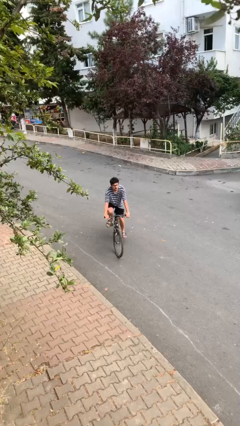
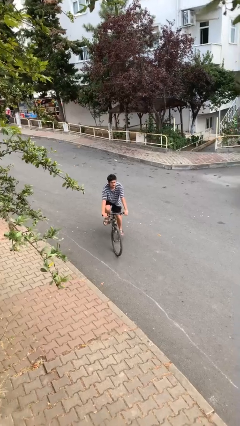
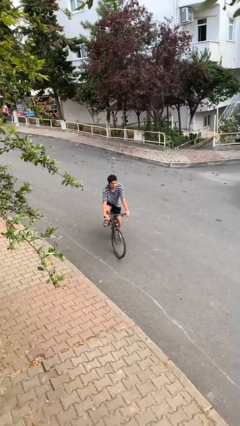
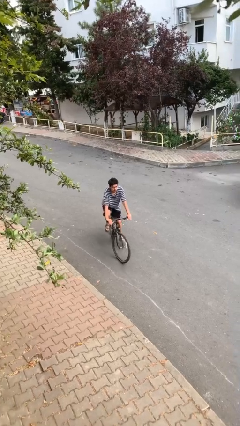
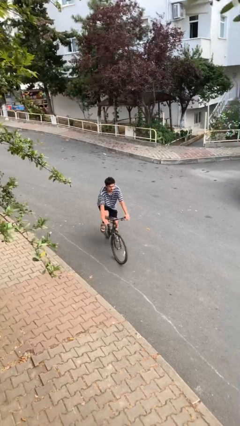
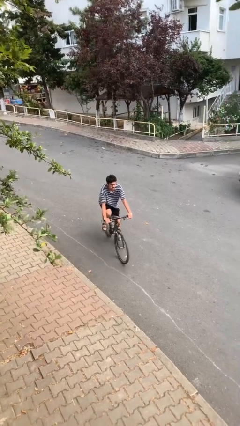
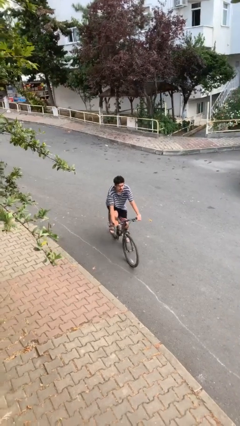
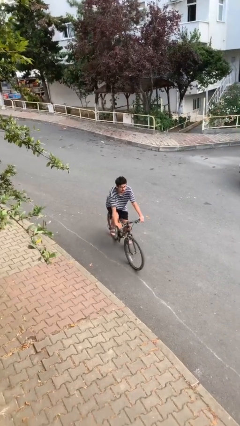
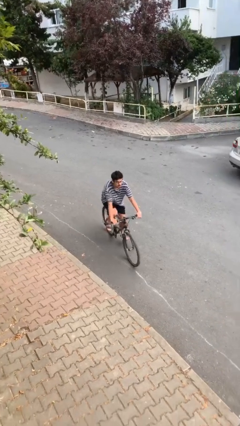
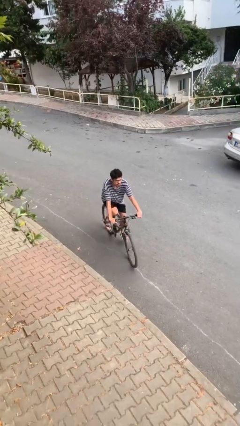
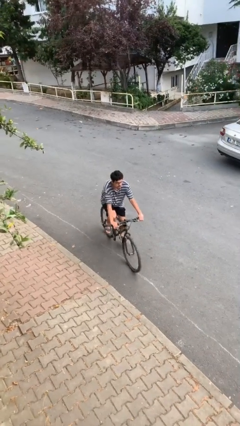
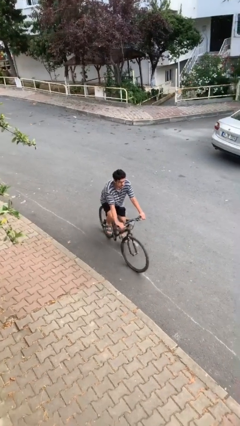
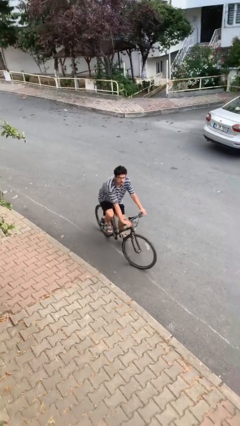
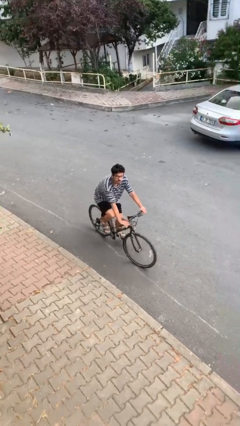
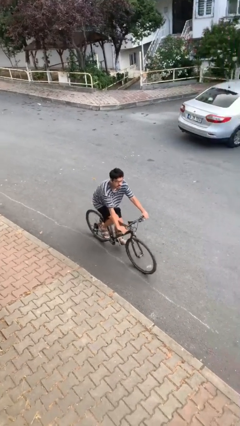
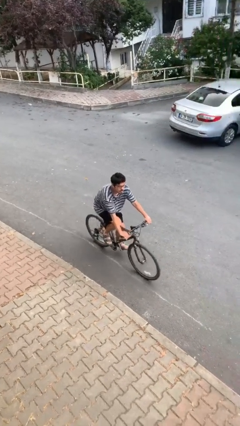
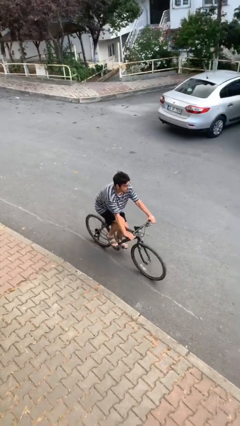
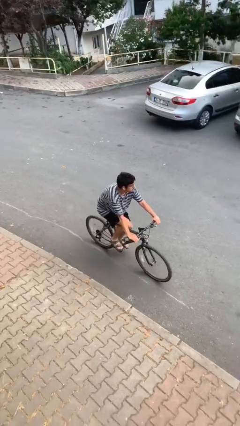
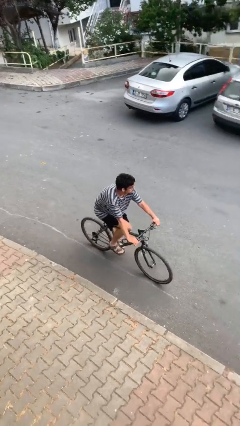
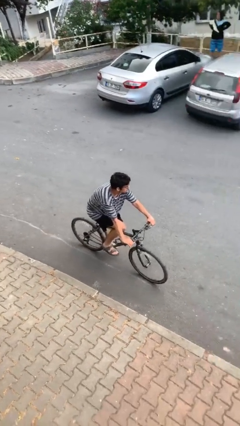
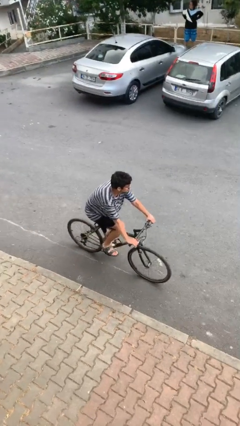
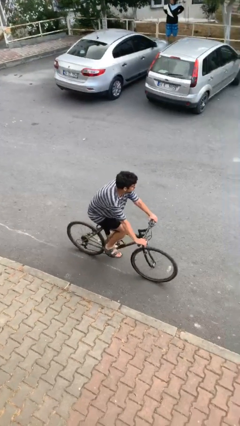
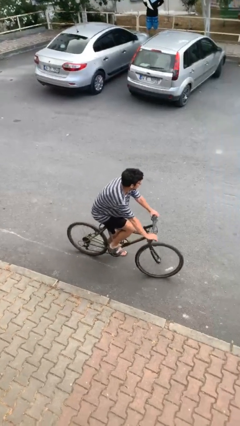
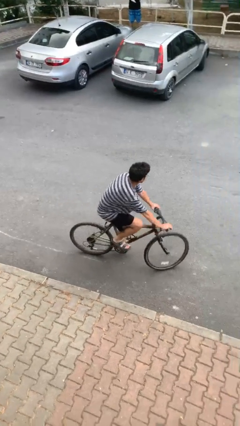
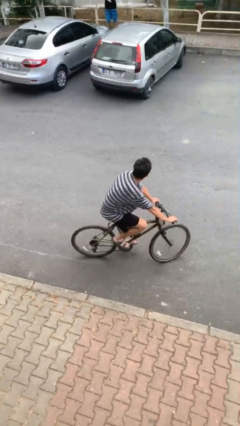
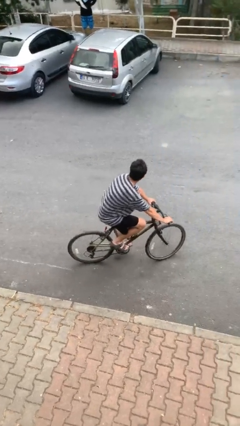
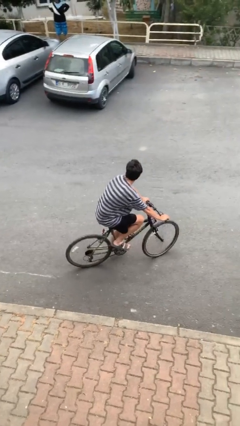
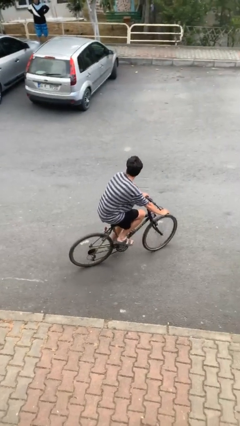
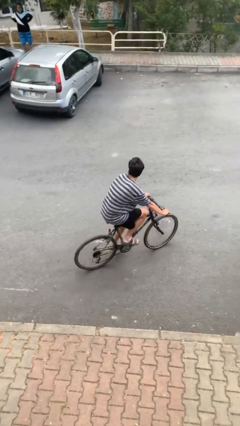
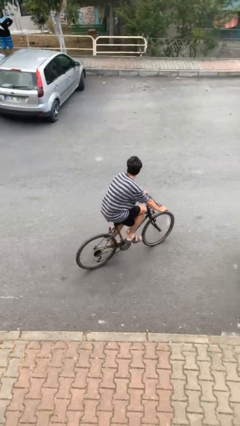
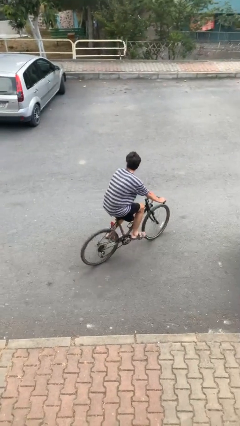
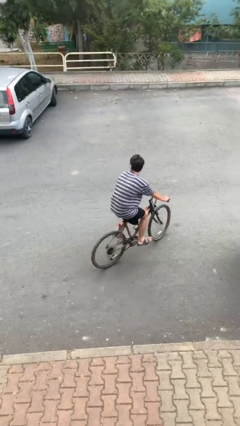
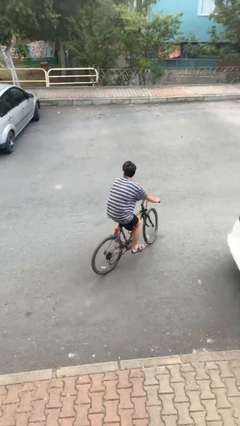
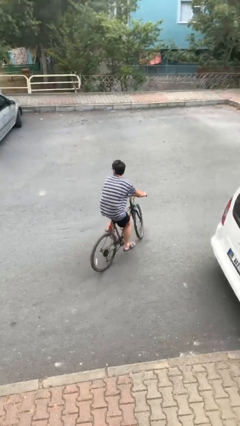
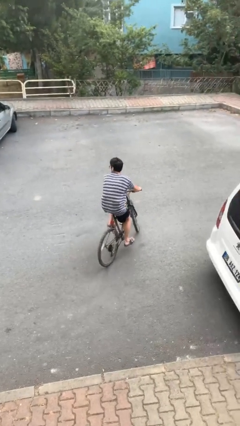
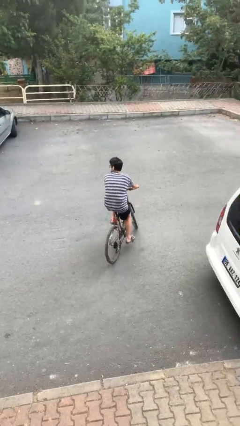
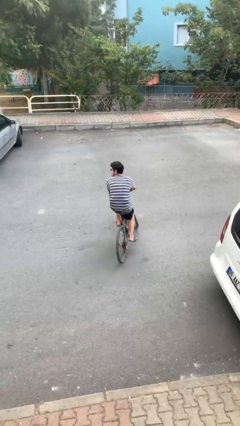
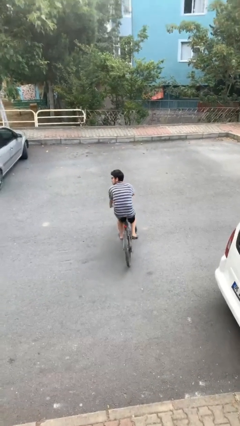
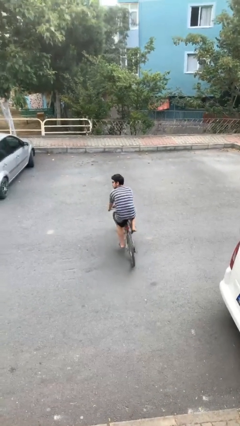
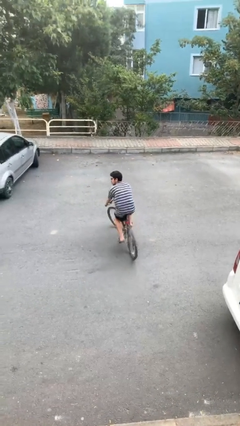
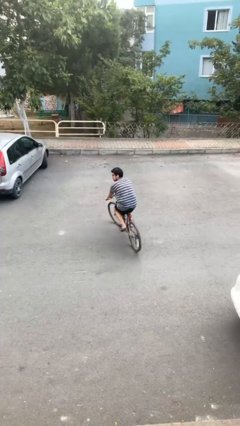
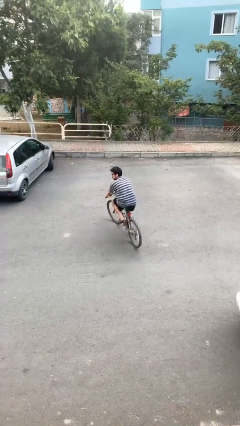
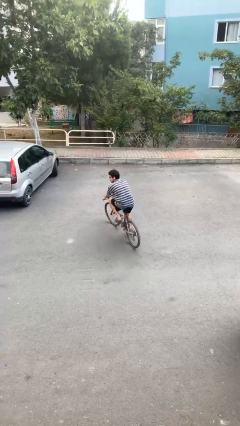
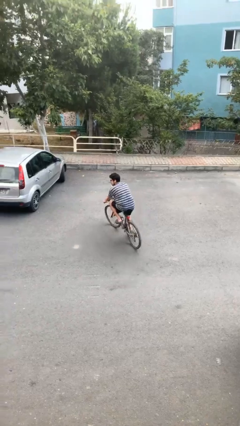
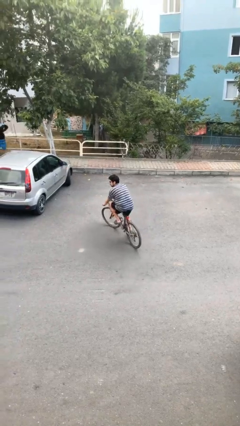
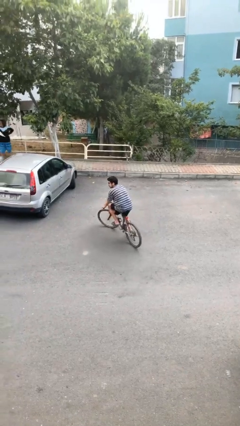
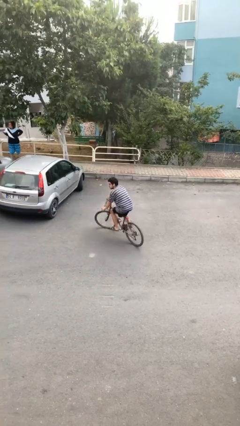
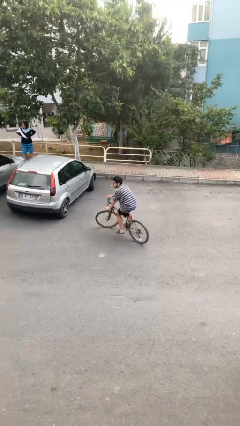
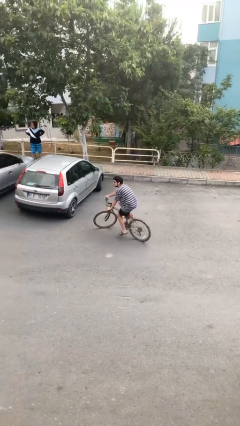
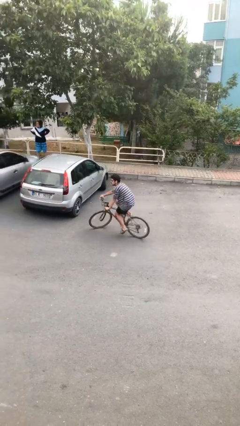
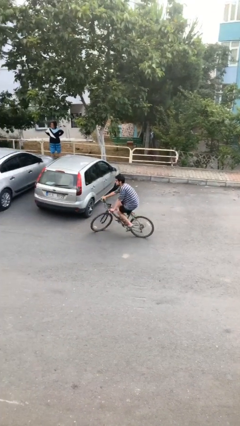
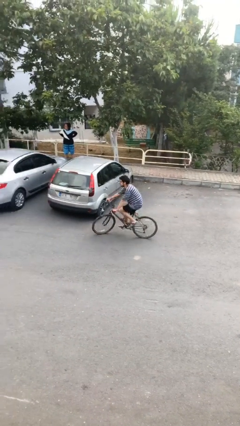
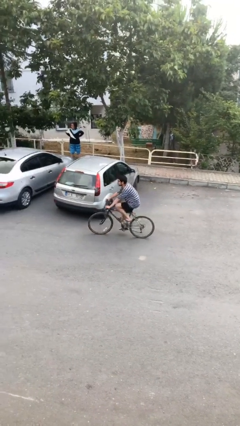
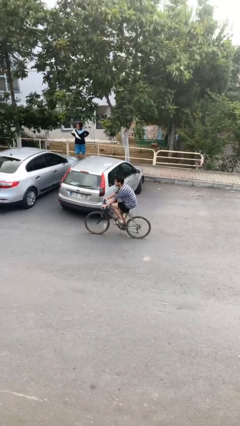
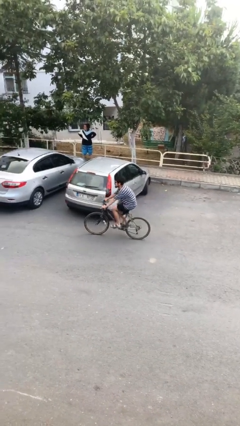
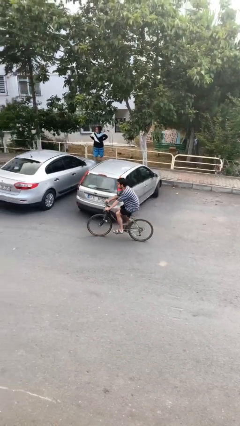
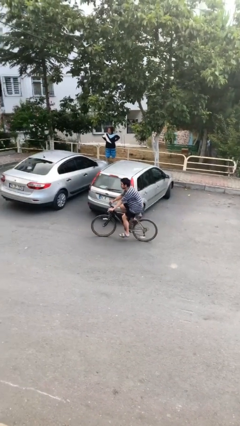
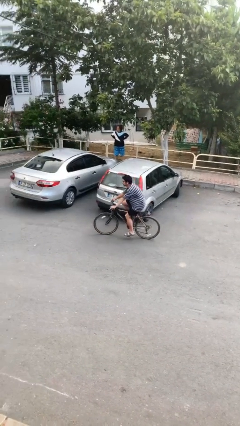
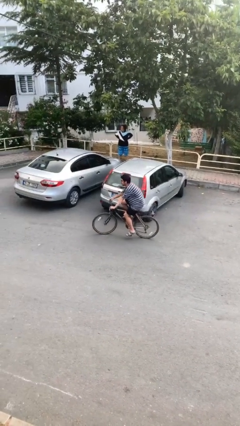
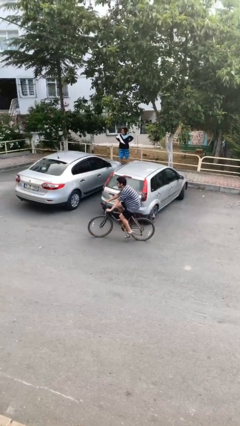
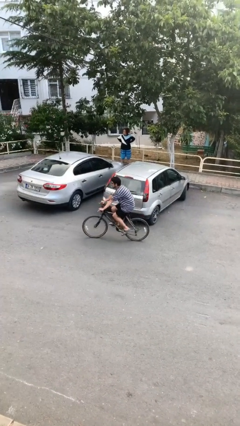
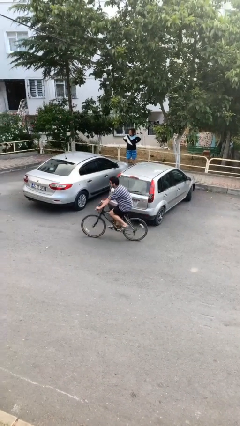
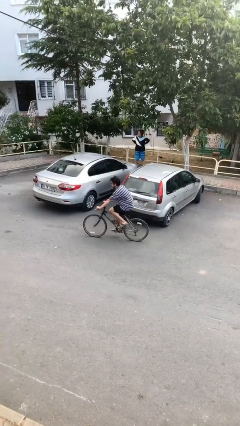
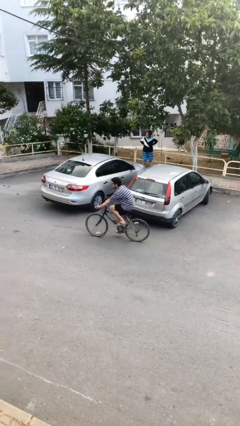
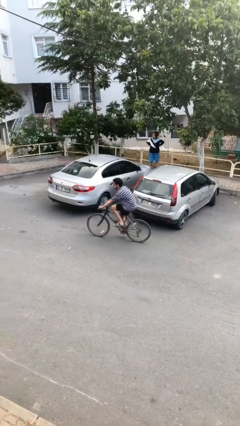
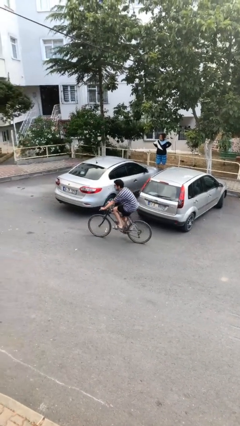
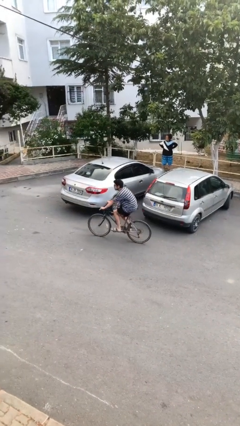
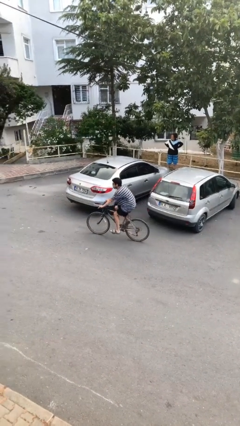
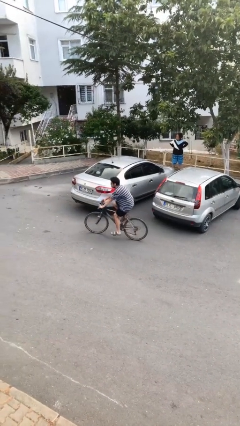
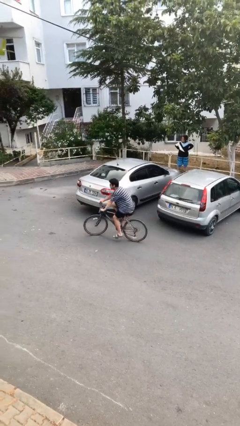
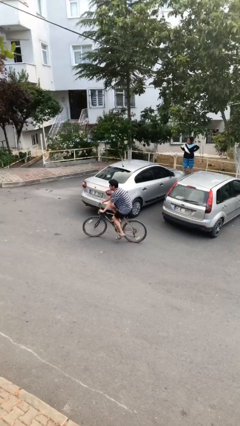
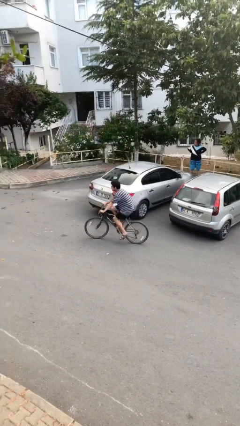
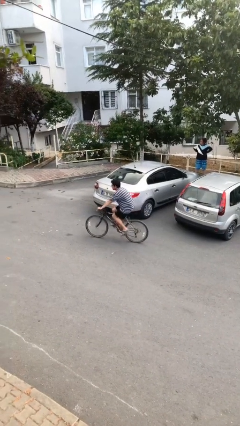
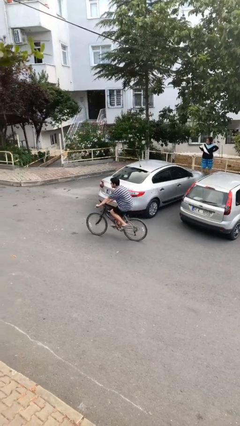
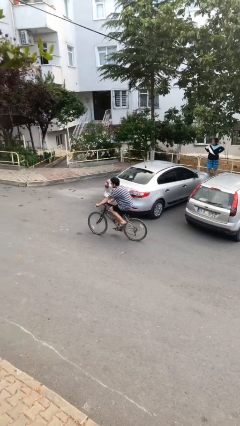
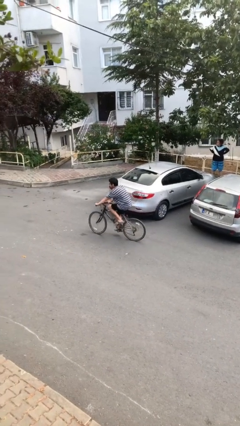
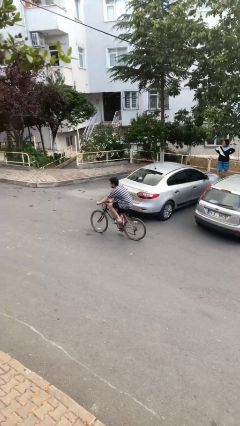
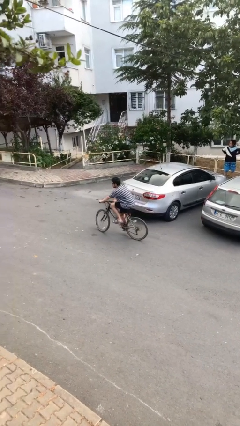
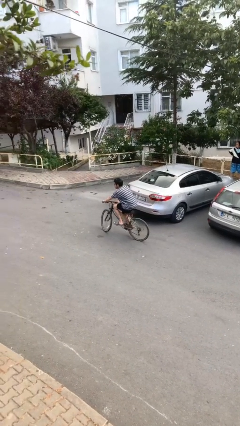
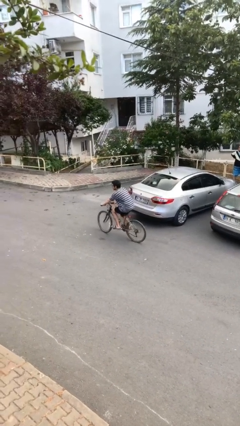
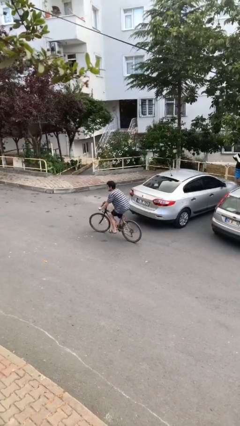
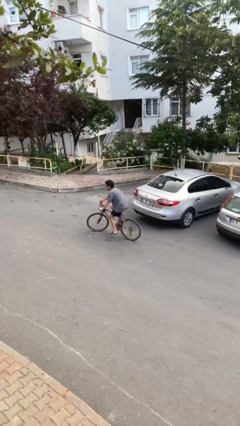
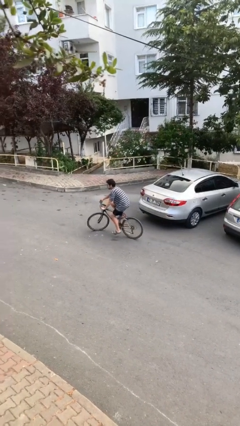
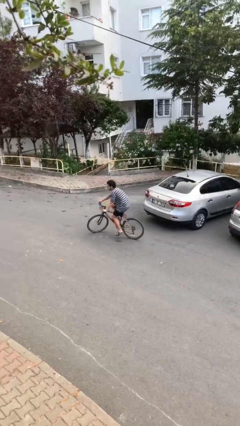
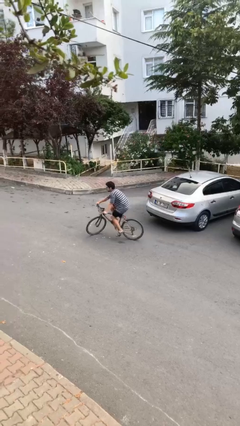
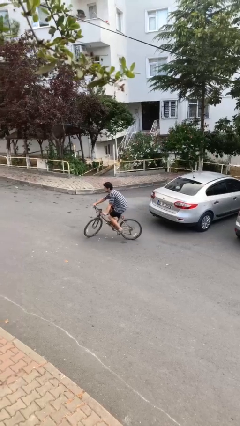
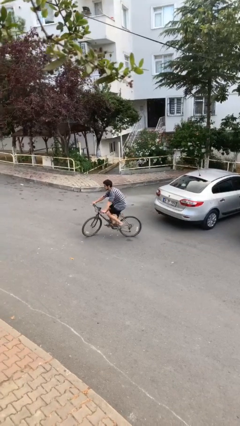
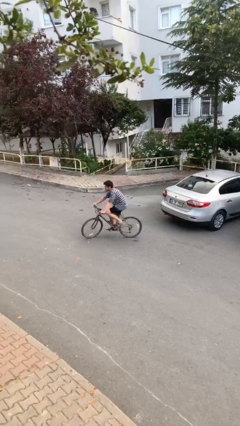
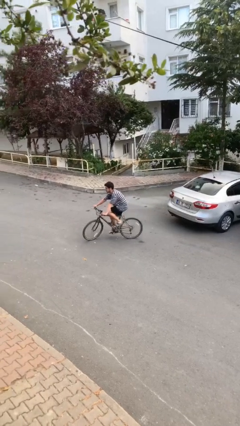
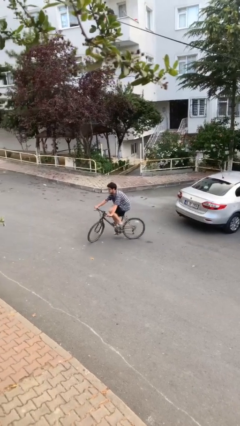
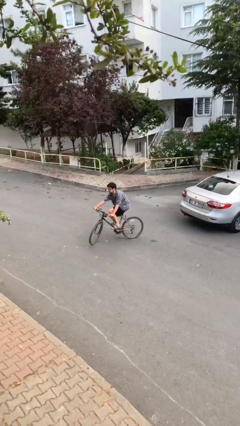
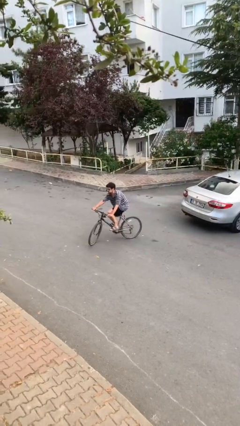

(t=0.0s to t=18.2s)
person rides bicycle
